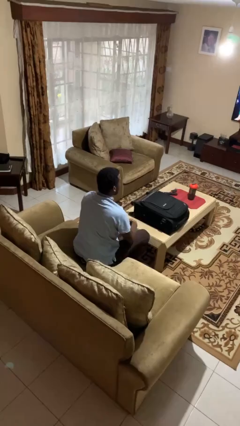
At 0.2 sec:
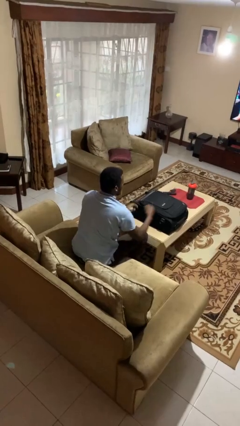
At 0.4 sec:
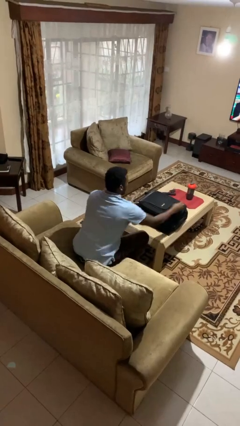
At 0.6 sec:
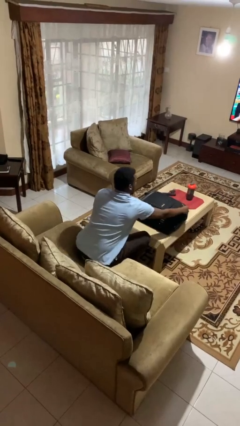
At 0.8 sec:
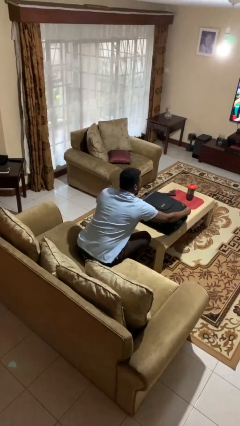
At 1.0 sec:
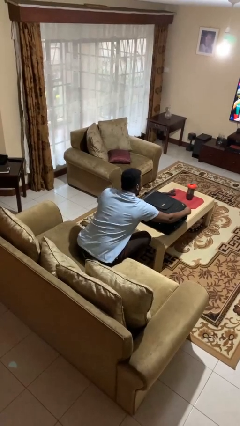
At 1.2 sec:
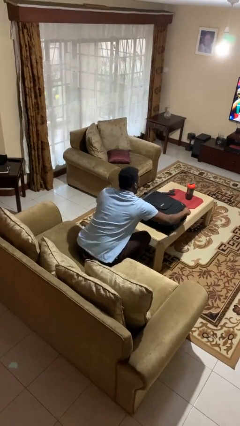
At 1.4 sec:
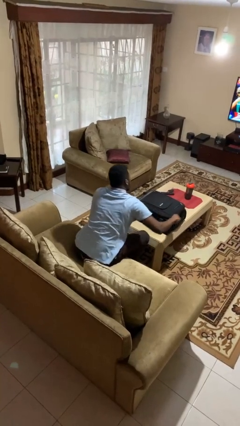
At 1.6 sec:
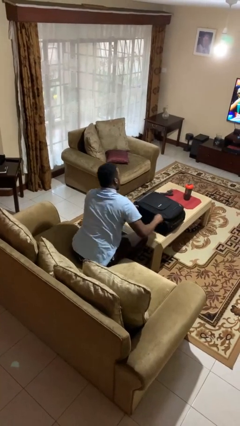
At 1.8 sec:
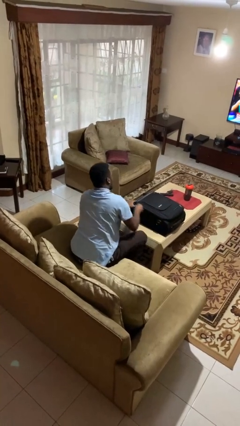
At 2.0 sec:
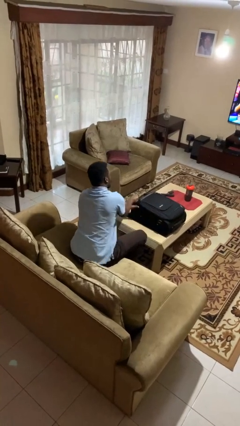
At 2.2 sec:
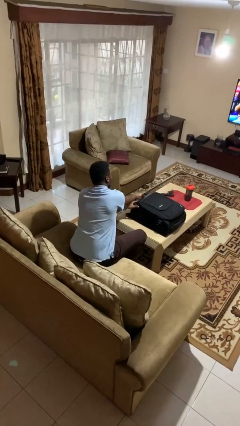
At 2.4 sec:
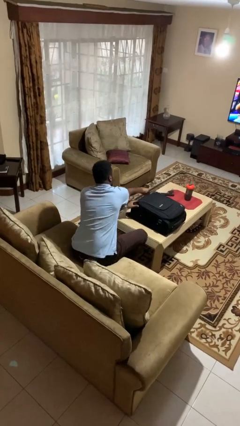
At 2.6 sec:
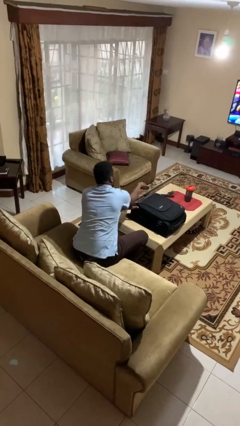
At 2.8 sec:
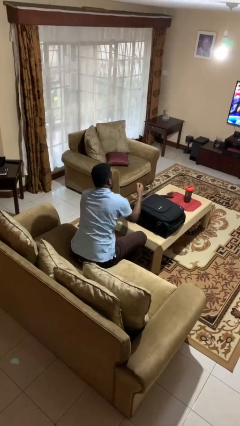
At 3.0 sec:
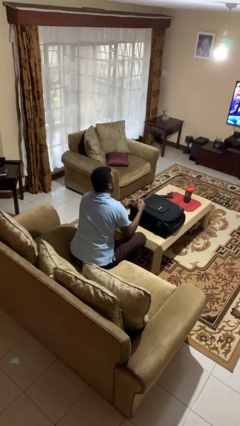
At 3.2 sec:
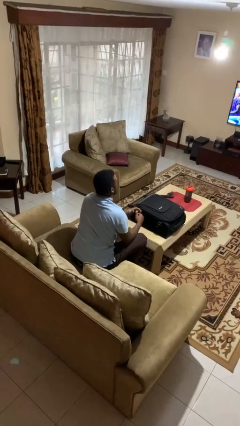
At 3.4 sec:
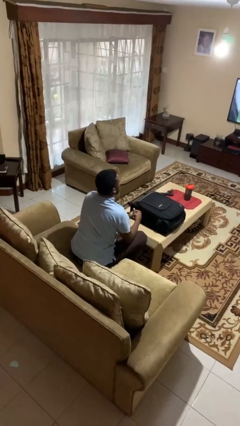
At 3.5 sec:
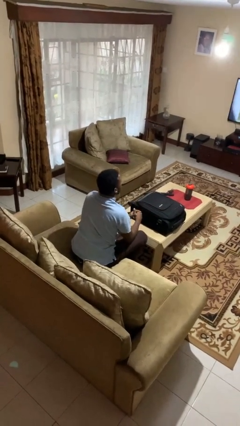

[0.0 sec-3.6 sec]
person opens suitcase

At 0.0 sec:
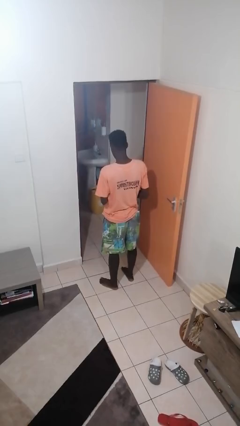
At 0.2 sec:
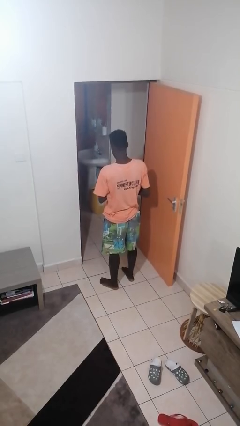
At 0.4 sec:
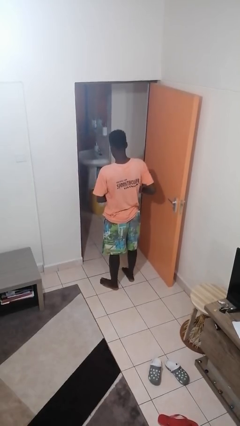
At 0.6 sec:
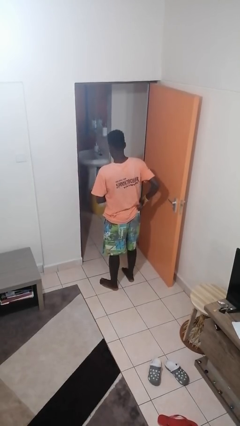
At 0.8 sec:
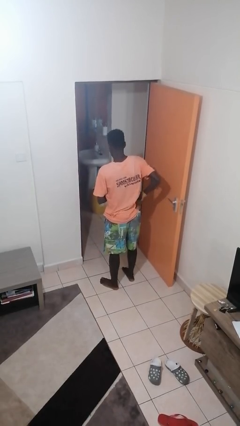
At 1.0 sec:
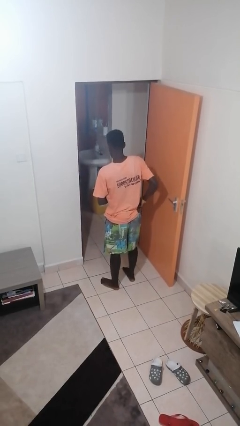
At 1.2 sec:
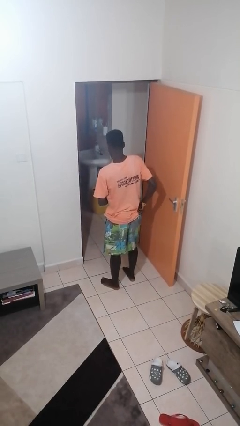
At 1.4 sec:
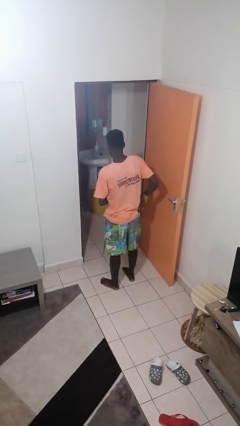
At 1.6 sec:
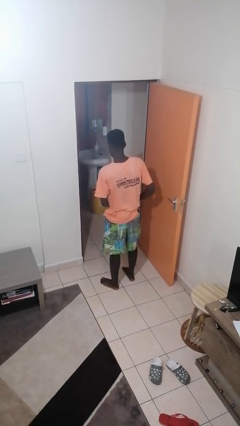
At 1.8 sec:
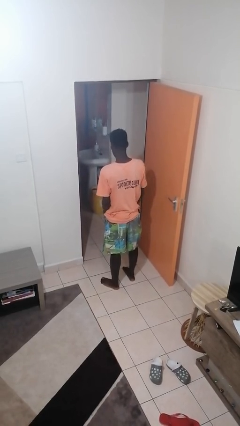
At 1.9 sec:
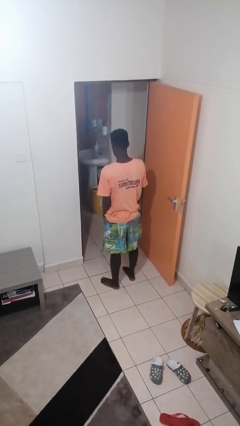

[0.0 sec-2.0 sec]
person puts phone into pocket

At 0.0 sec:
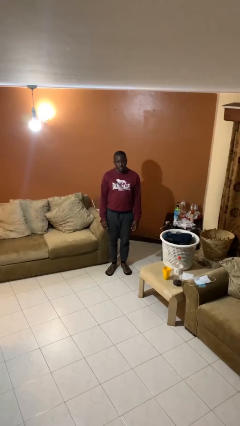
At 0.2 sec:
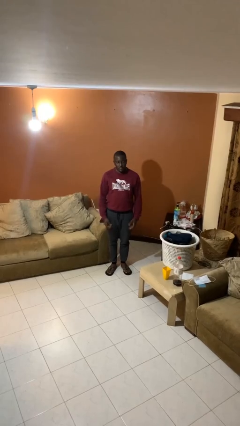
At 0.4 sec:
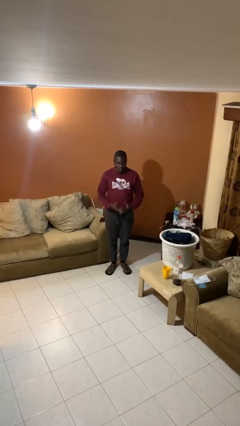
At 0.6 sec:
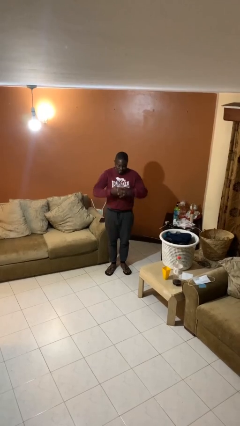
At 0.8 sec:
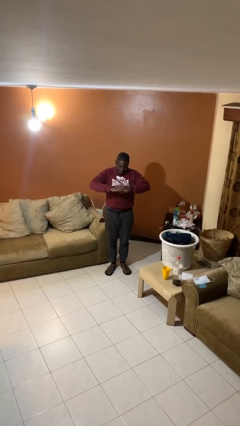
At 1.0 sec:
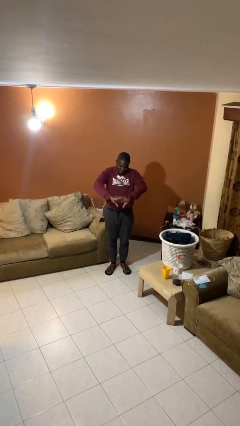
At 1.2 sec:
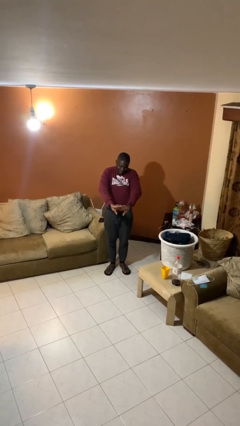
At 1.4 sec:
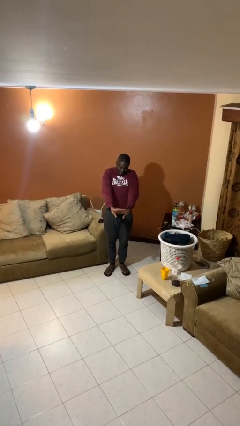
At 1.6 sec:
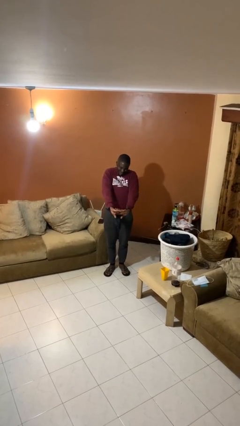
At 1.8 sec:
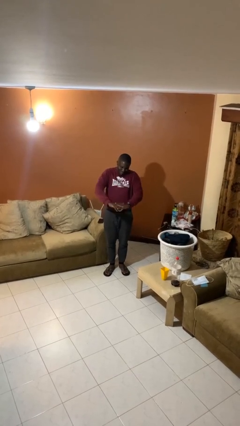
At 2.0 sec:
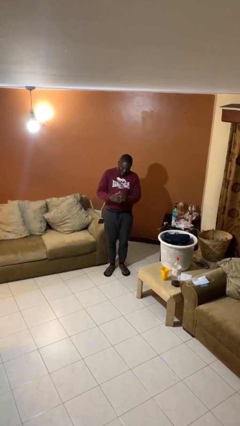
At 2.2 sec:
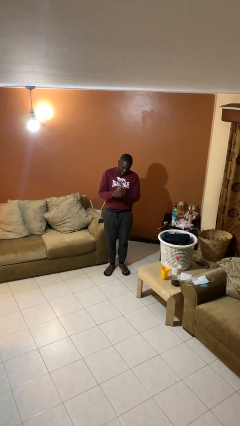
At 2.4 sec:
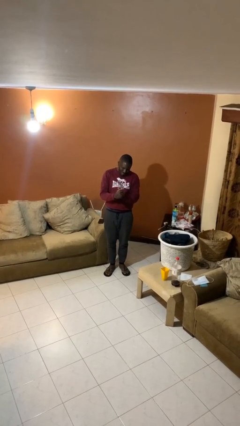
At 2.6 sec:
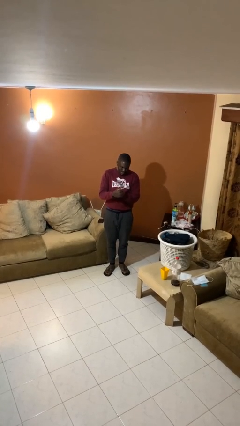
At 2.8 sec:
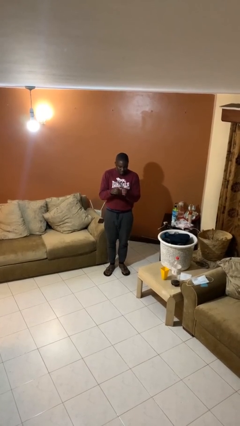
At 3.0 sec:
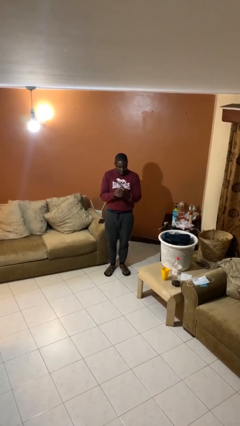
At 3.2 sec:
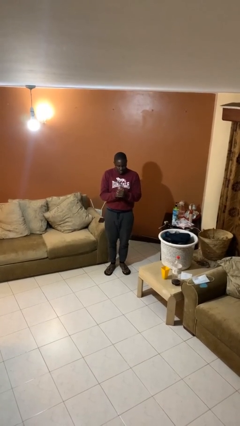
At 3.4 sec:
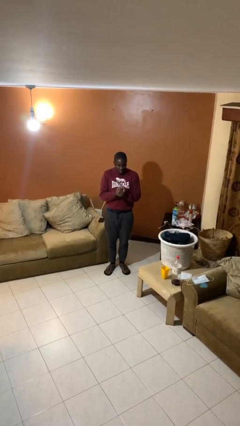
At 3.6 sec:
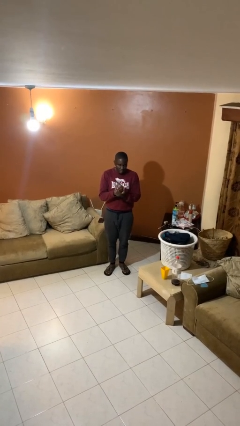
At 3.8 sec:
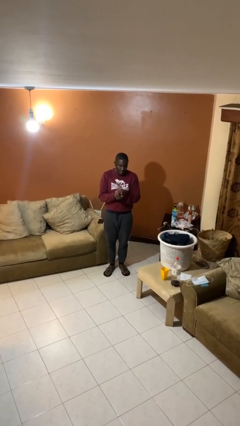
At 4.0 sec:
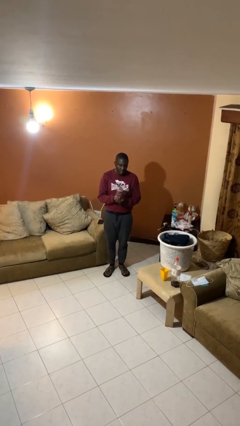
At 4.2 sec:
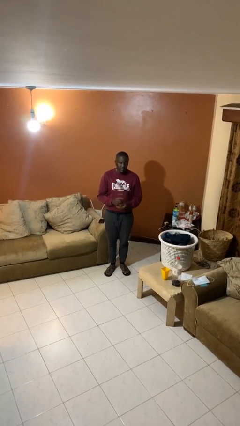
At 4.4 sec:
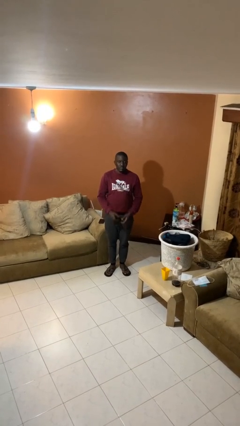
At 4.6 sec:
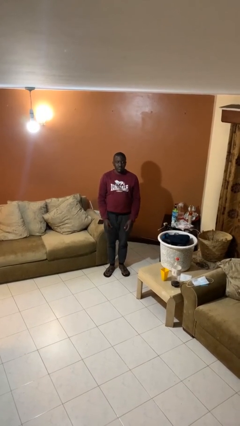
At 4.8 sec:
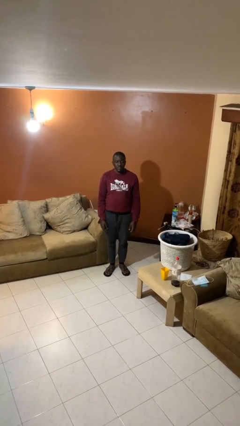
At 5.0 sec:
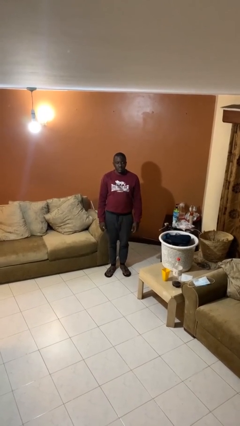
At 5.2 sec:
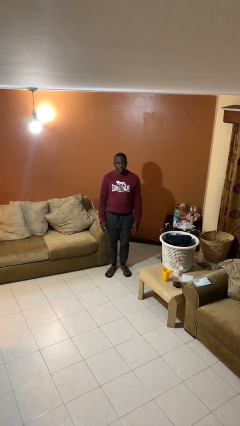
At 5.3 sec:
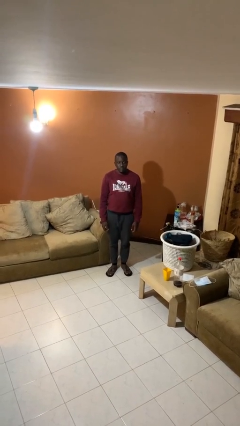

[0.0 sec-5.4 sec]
person cracks knuckles

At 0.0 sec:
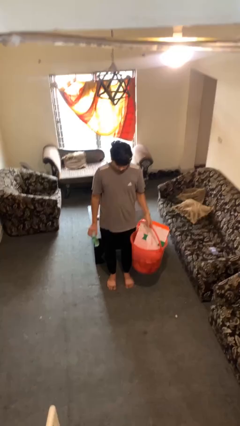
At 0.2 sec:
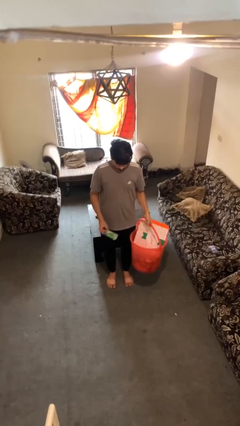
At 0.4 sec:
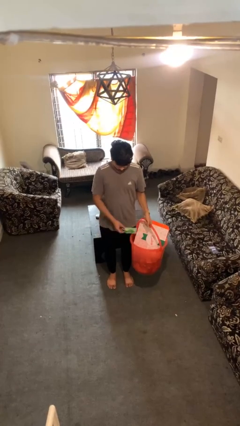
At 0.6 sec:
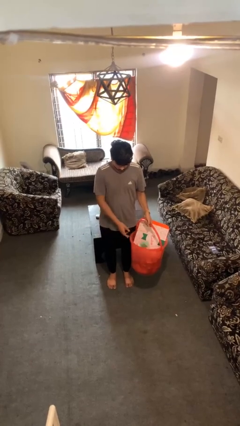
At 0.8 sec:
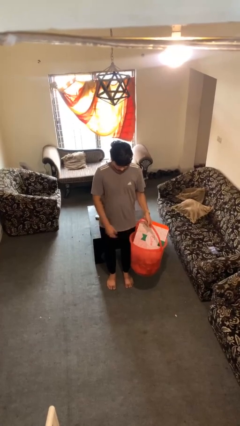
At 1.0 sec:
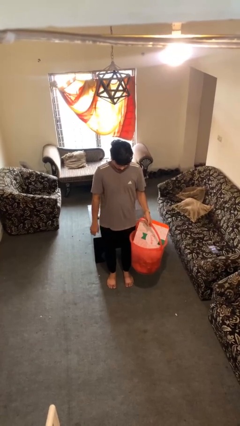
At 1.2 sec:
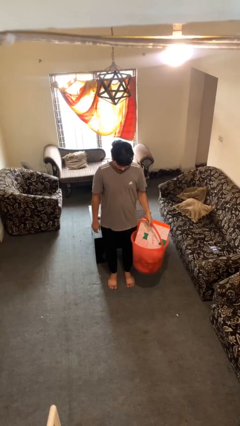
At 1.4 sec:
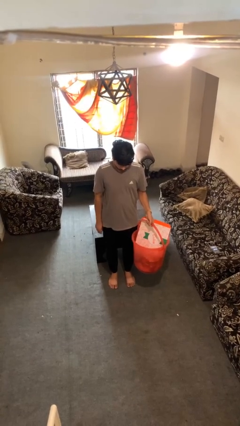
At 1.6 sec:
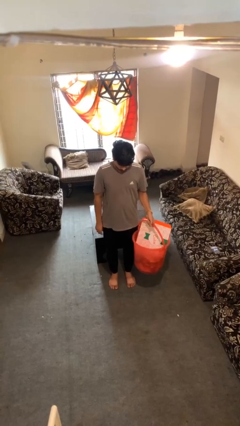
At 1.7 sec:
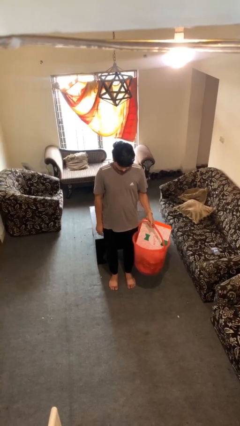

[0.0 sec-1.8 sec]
person puts object into basket

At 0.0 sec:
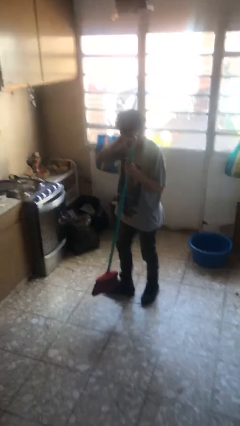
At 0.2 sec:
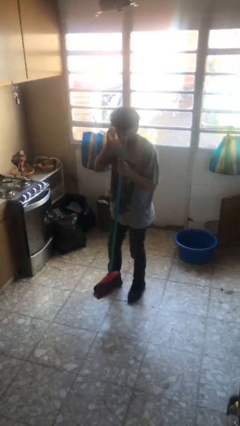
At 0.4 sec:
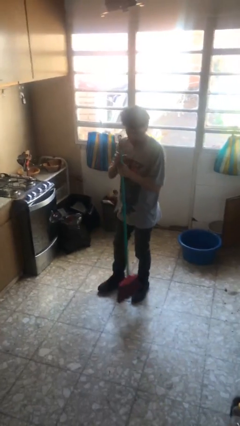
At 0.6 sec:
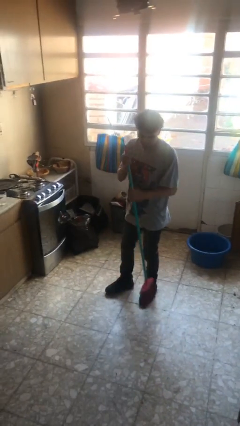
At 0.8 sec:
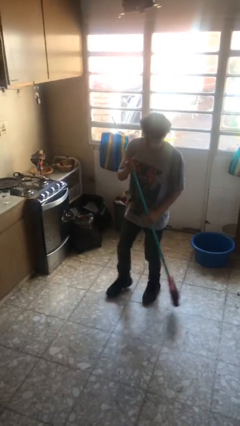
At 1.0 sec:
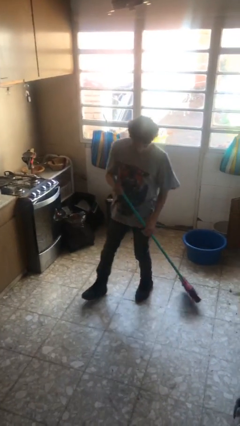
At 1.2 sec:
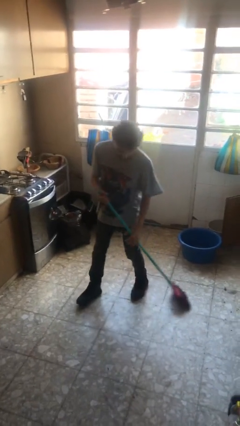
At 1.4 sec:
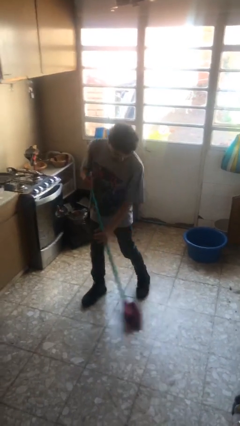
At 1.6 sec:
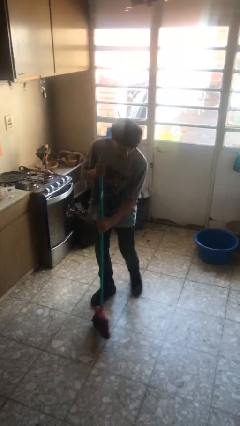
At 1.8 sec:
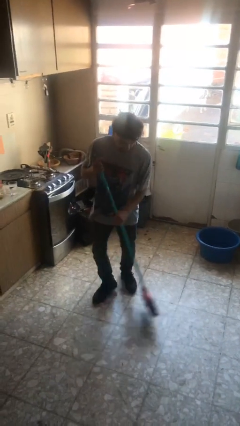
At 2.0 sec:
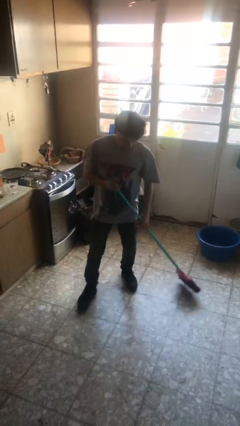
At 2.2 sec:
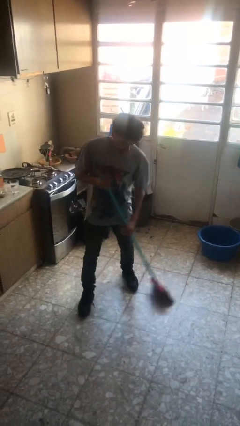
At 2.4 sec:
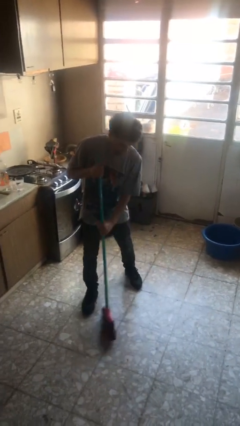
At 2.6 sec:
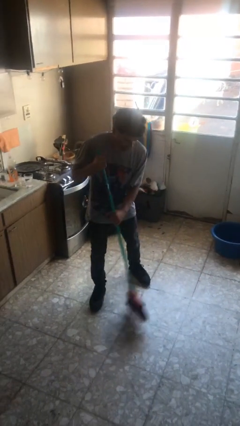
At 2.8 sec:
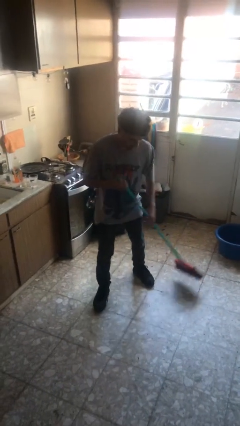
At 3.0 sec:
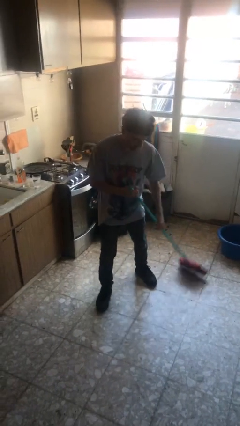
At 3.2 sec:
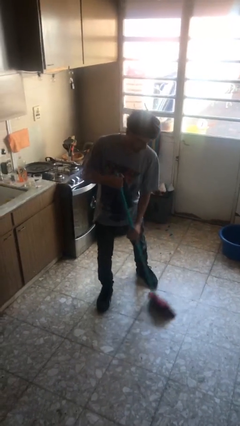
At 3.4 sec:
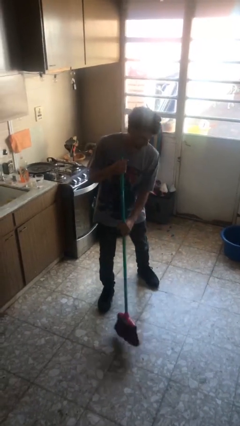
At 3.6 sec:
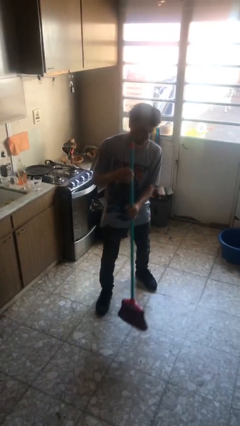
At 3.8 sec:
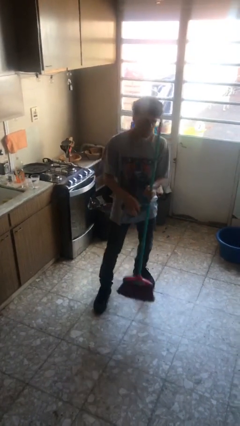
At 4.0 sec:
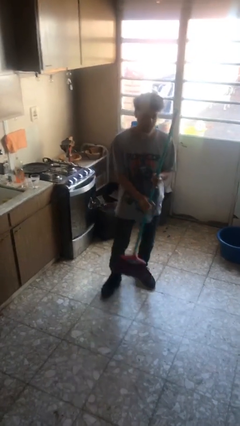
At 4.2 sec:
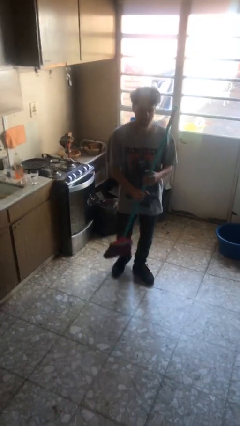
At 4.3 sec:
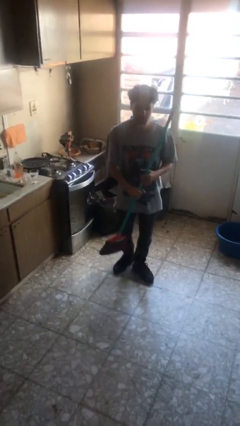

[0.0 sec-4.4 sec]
person sweeps floor
